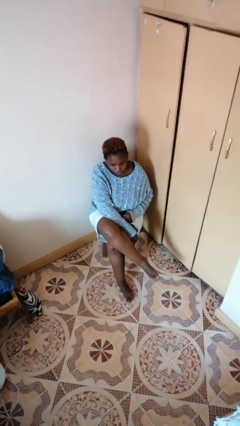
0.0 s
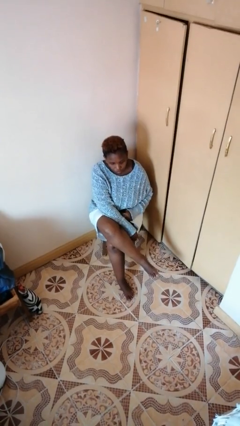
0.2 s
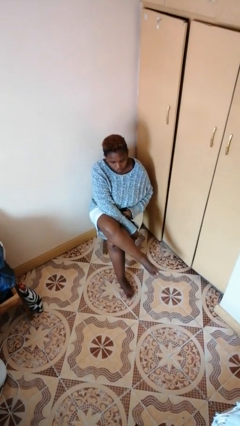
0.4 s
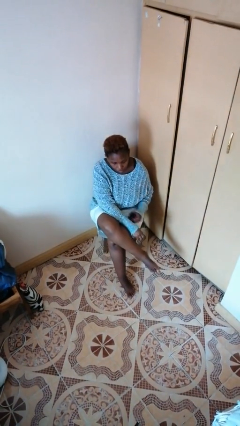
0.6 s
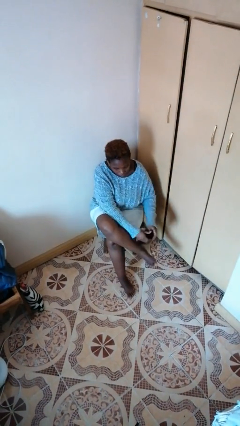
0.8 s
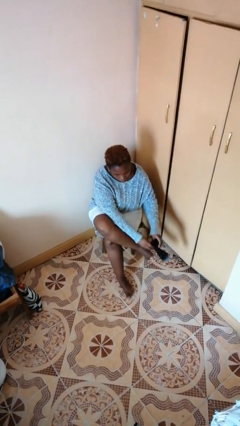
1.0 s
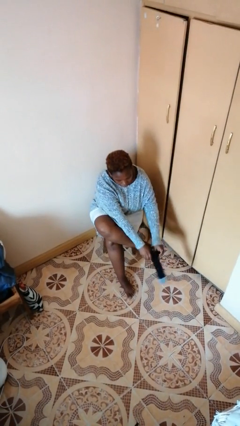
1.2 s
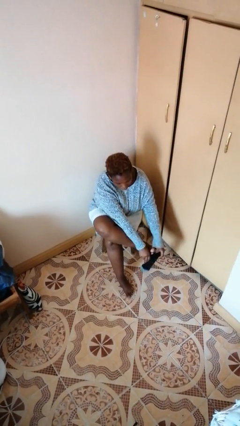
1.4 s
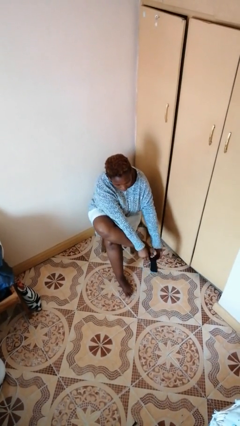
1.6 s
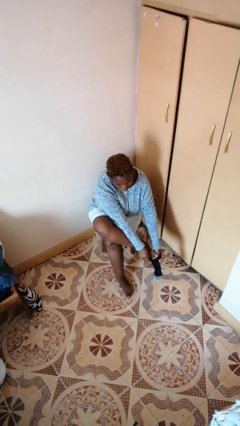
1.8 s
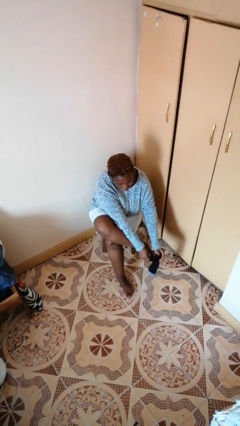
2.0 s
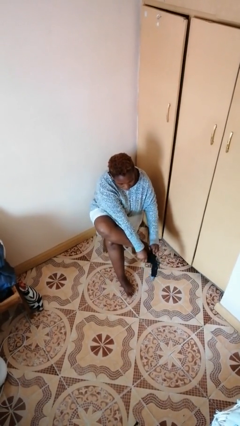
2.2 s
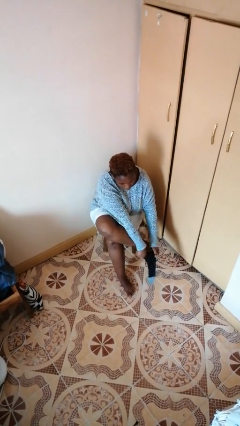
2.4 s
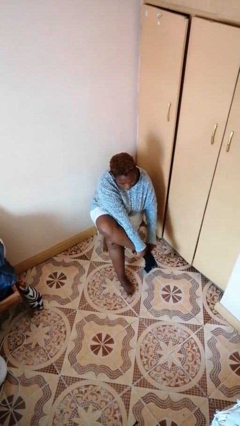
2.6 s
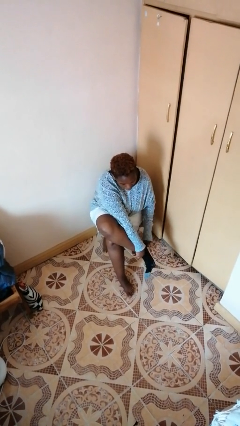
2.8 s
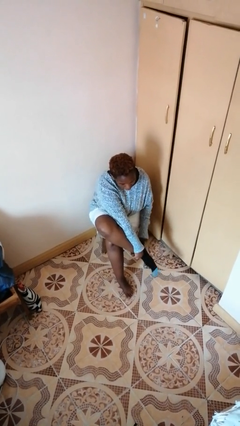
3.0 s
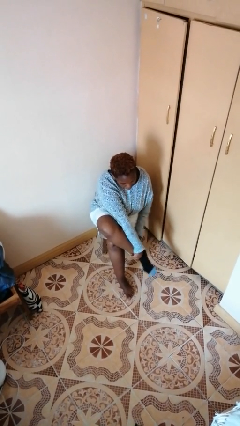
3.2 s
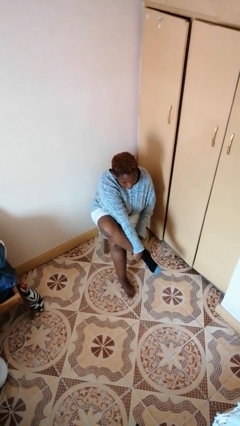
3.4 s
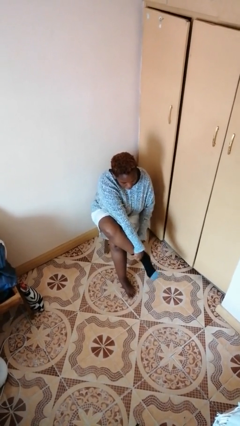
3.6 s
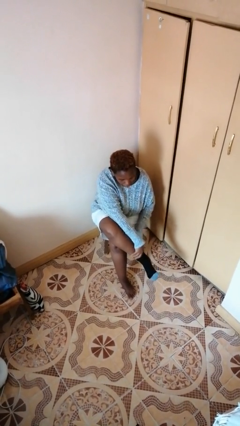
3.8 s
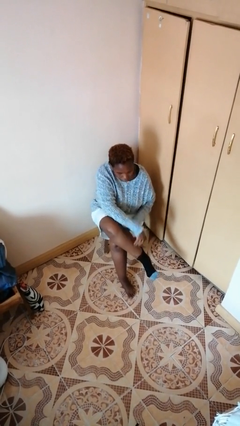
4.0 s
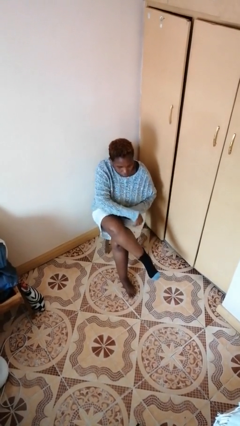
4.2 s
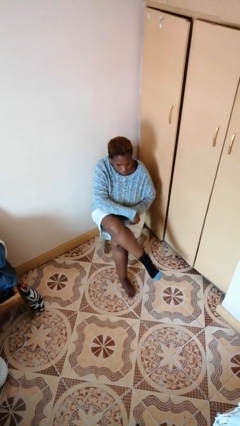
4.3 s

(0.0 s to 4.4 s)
person puts on socks

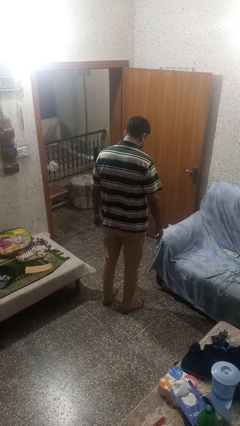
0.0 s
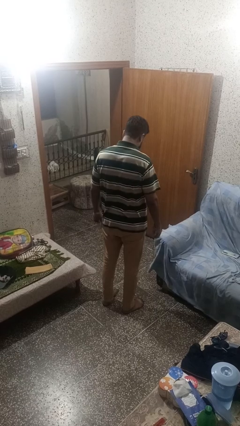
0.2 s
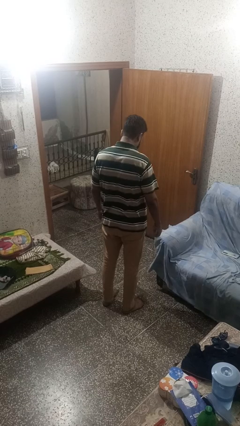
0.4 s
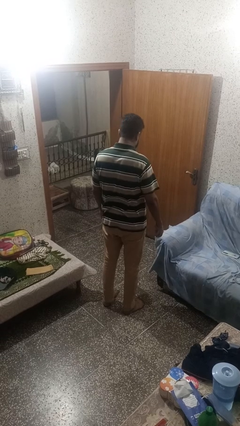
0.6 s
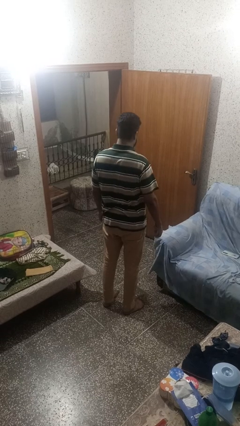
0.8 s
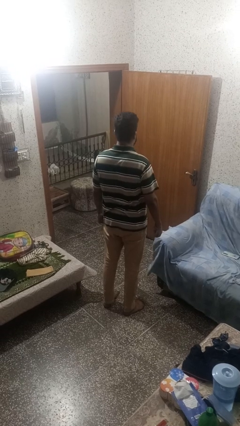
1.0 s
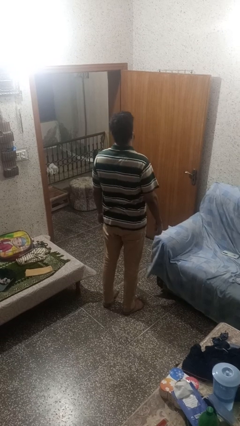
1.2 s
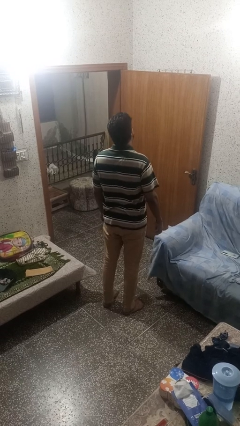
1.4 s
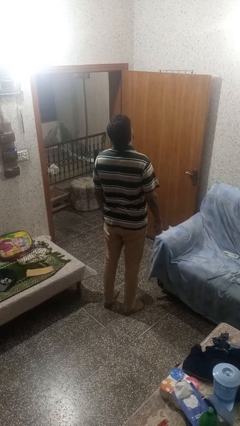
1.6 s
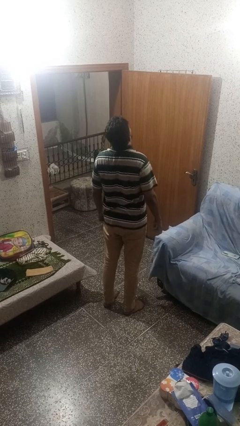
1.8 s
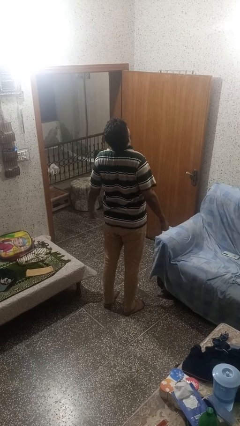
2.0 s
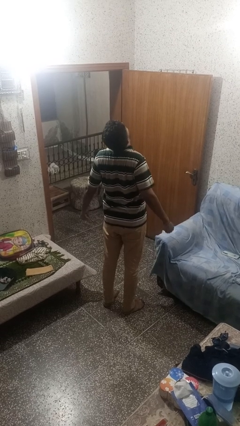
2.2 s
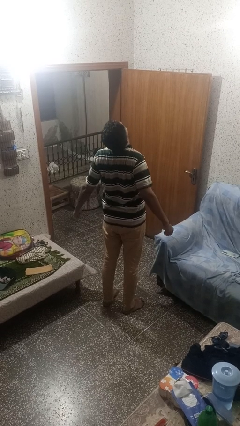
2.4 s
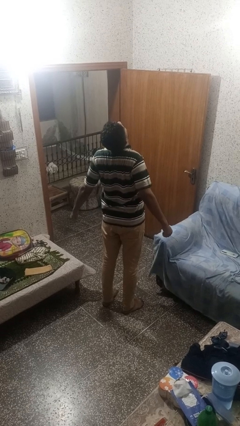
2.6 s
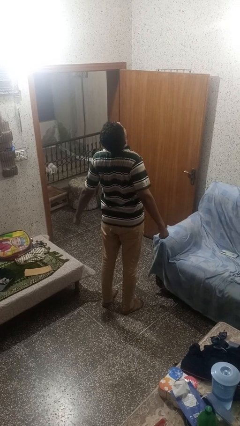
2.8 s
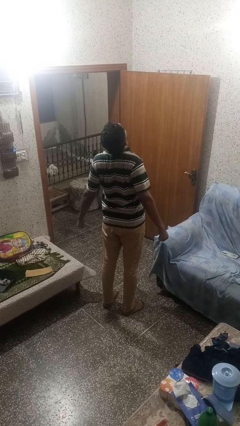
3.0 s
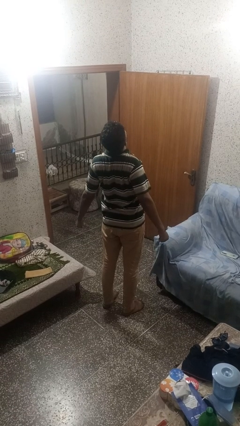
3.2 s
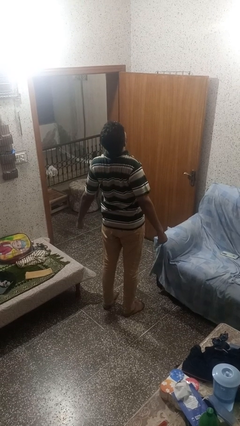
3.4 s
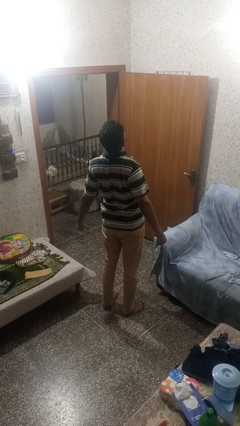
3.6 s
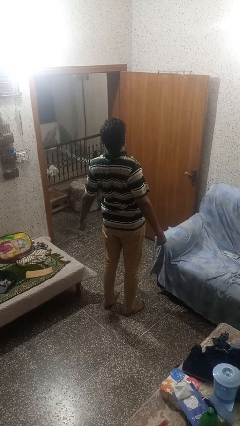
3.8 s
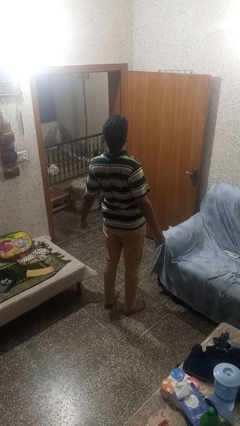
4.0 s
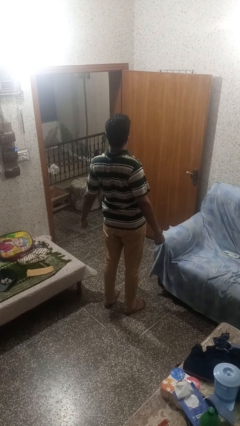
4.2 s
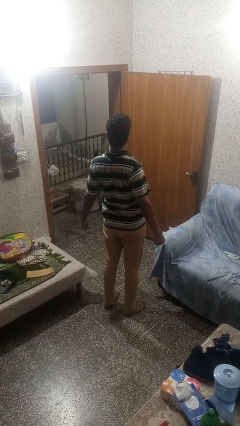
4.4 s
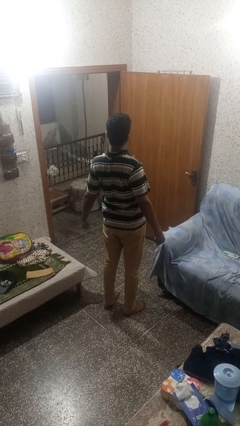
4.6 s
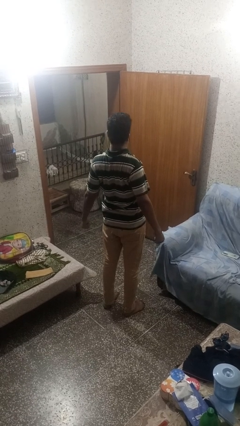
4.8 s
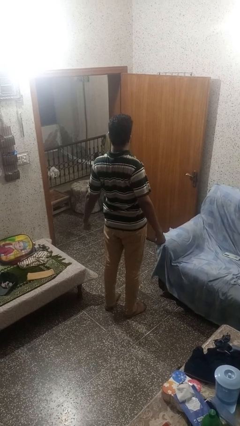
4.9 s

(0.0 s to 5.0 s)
person stretches back

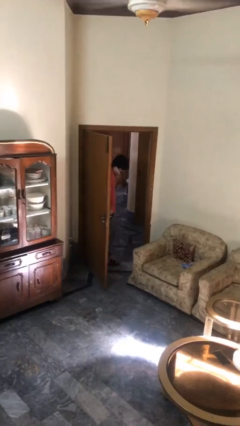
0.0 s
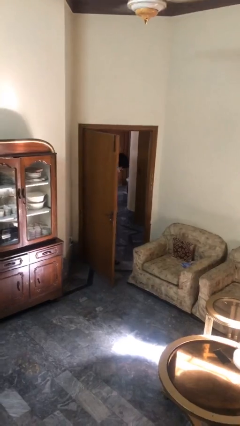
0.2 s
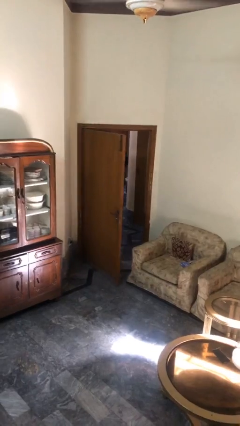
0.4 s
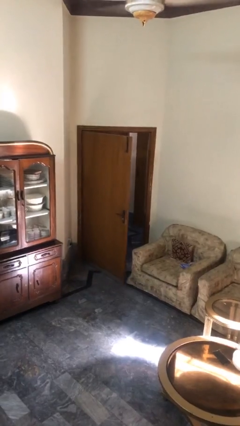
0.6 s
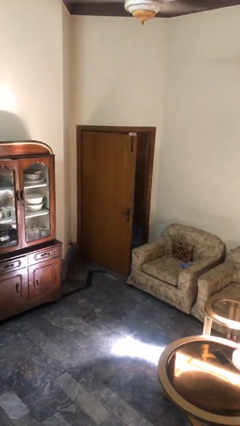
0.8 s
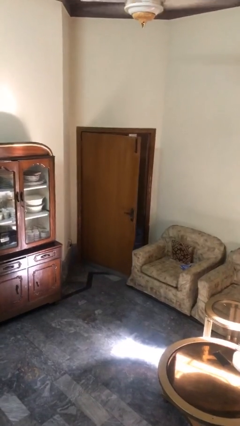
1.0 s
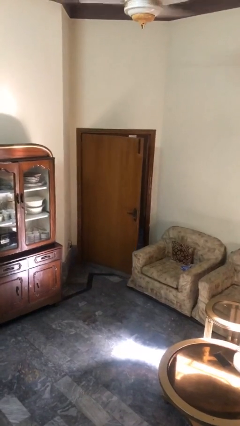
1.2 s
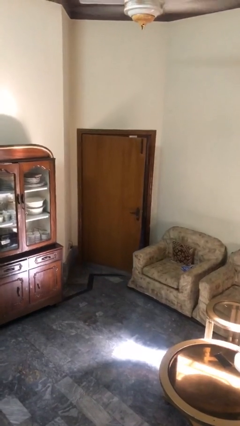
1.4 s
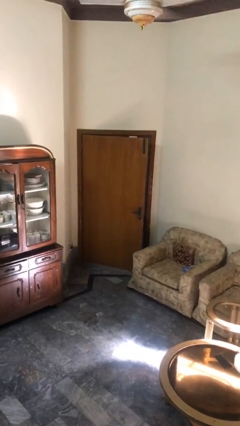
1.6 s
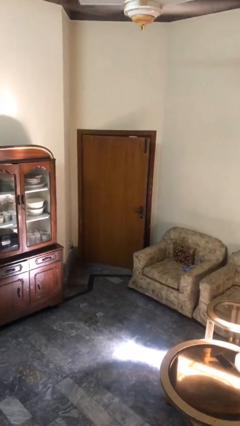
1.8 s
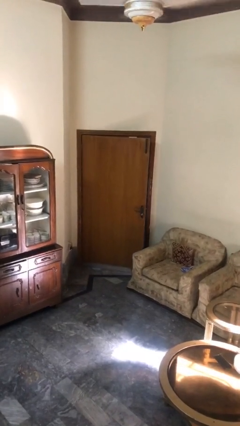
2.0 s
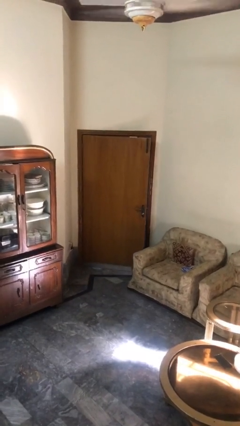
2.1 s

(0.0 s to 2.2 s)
person closes facility door

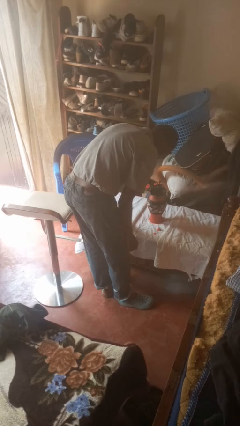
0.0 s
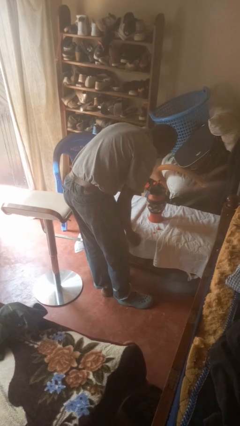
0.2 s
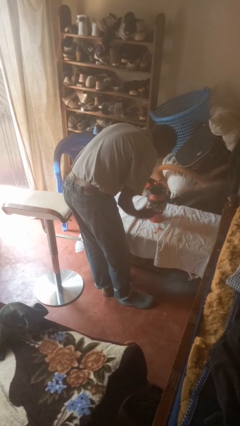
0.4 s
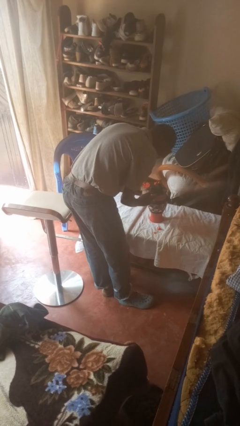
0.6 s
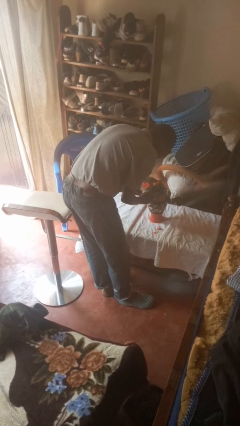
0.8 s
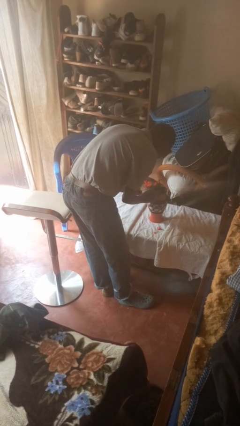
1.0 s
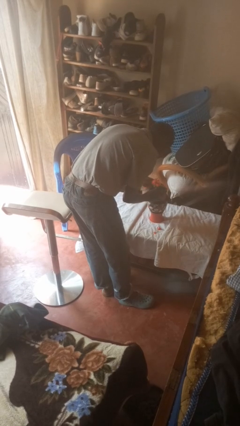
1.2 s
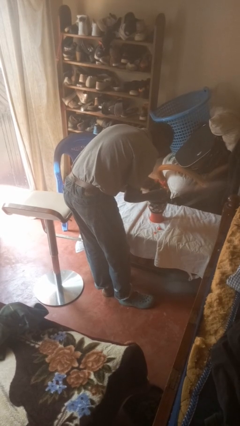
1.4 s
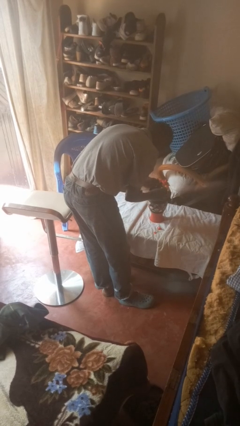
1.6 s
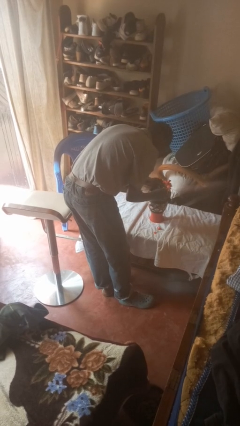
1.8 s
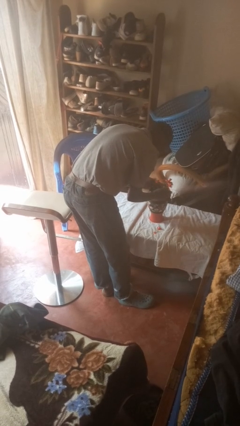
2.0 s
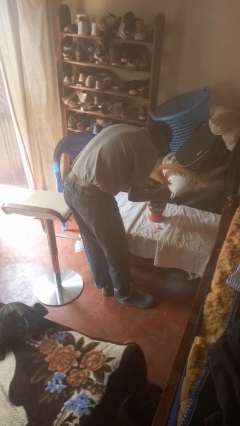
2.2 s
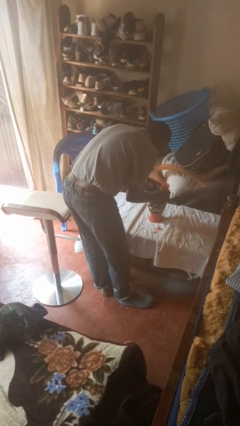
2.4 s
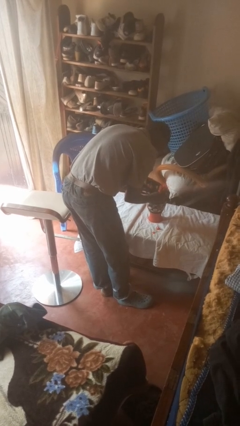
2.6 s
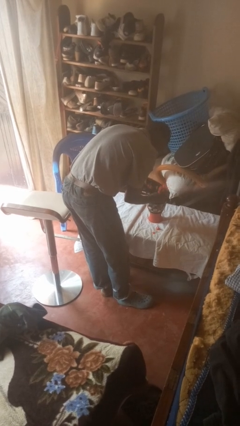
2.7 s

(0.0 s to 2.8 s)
person arranges flowers in vase

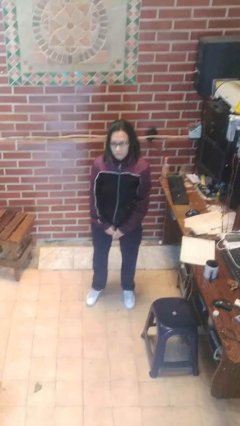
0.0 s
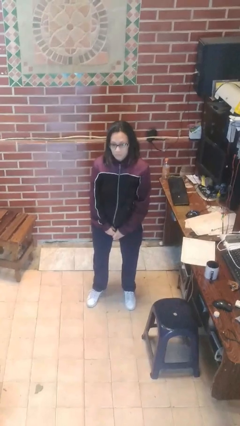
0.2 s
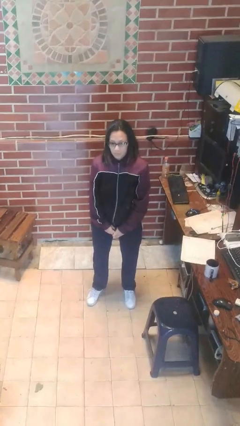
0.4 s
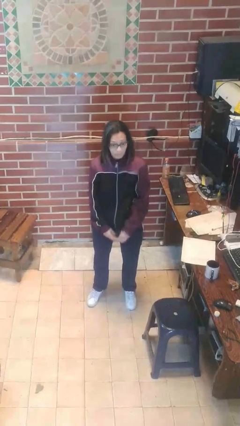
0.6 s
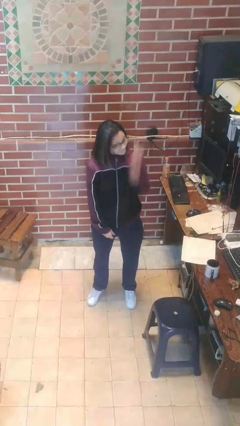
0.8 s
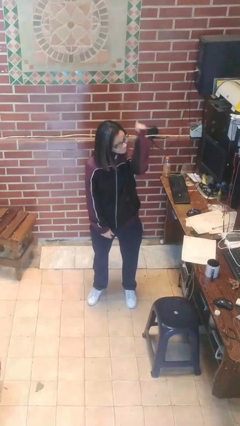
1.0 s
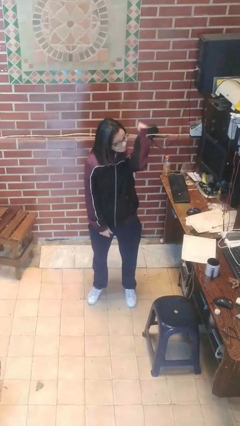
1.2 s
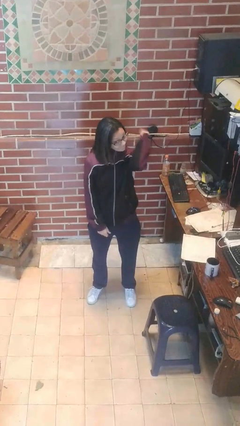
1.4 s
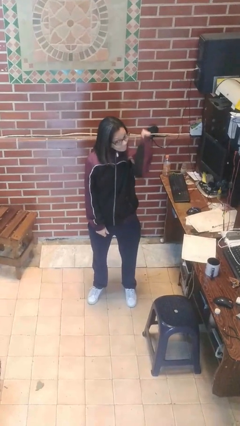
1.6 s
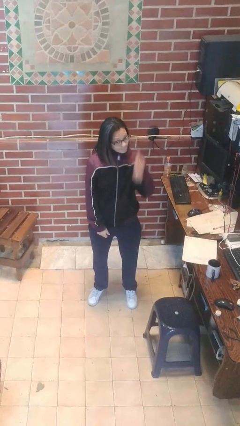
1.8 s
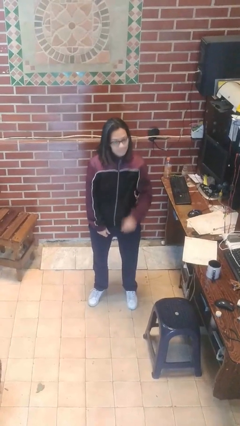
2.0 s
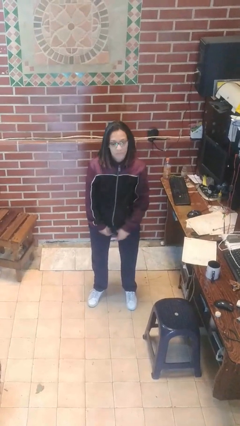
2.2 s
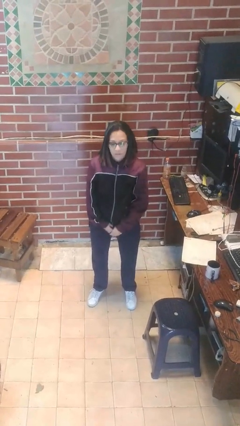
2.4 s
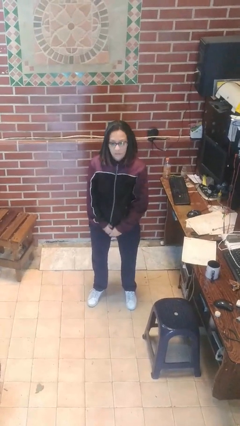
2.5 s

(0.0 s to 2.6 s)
person gestures behind me
